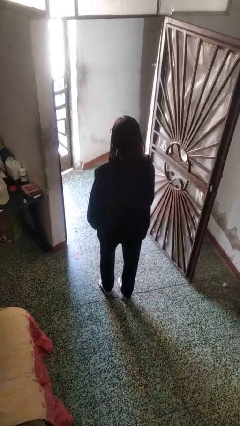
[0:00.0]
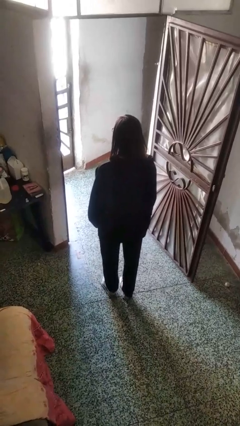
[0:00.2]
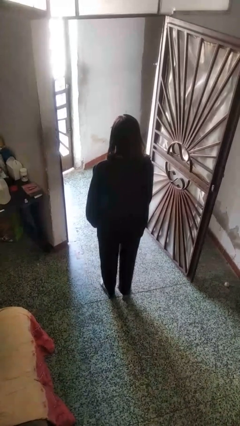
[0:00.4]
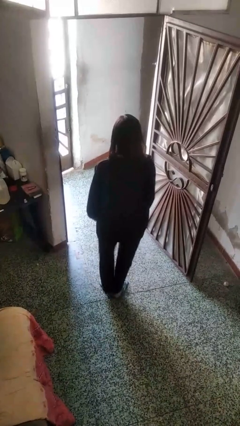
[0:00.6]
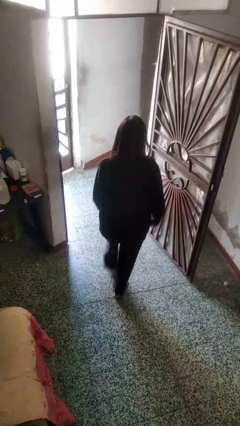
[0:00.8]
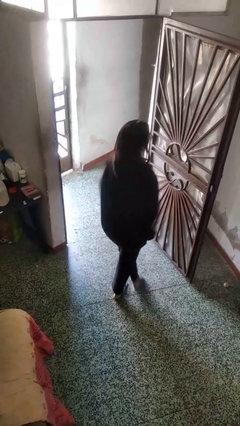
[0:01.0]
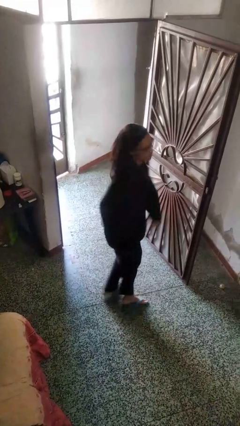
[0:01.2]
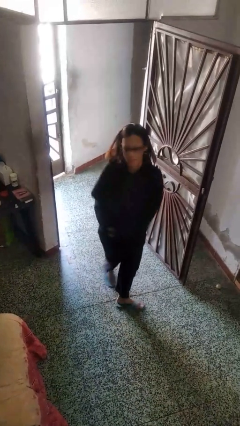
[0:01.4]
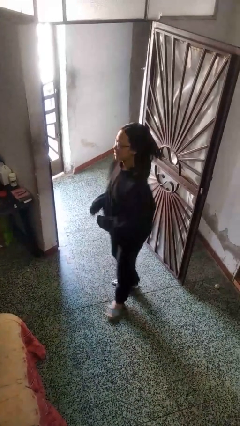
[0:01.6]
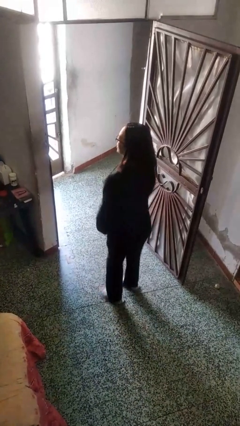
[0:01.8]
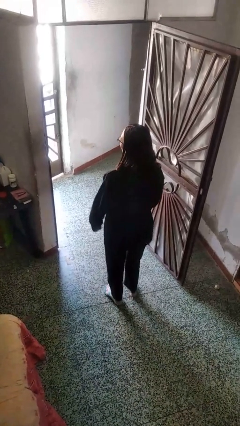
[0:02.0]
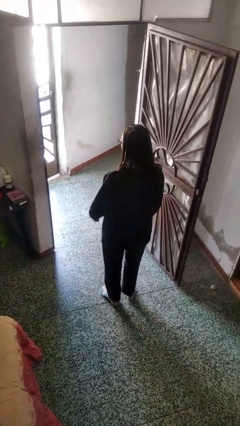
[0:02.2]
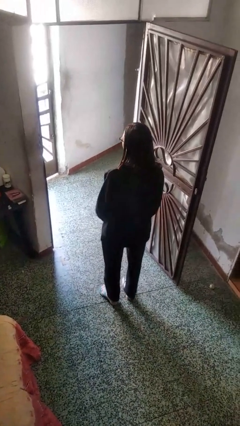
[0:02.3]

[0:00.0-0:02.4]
person twirls

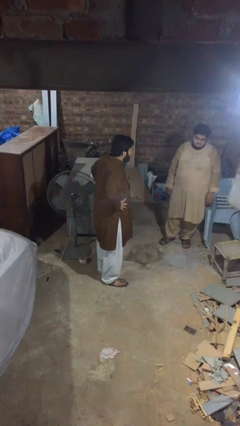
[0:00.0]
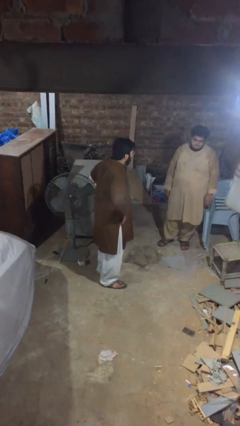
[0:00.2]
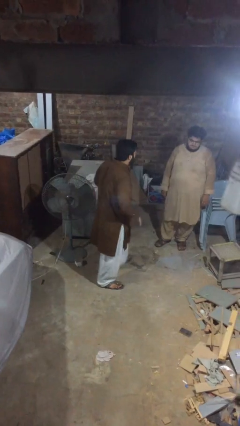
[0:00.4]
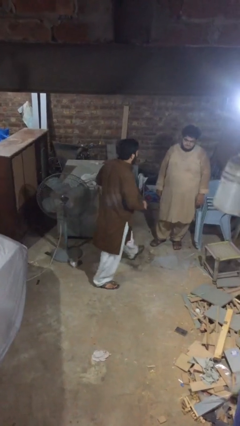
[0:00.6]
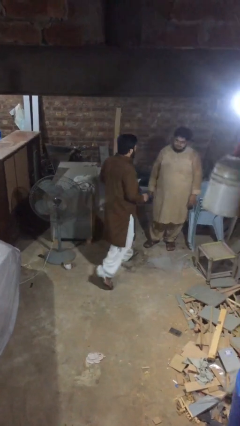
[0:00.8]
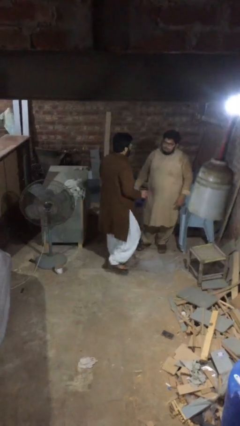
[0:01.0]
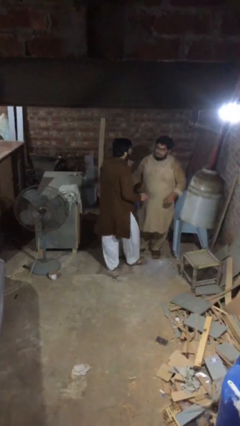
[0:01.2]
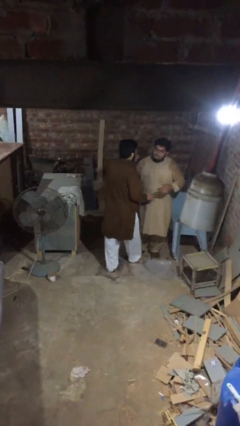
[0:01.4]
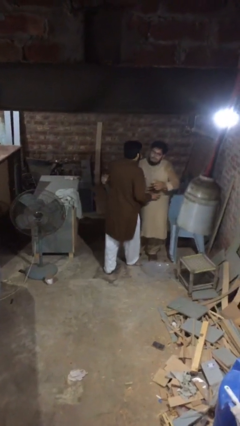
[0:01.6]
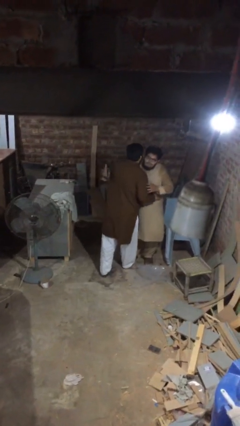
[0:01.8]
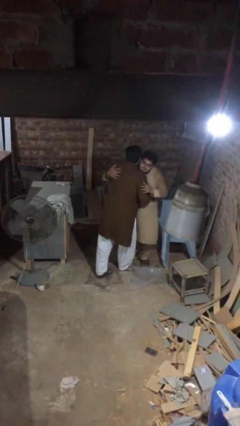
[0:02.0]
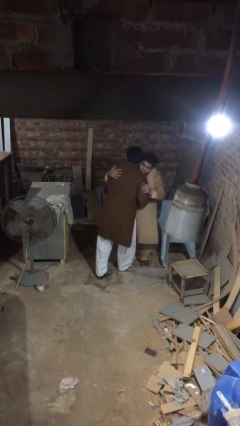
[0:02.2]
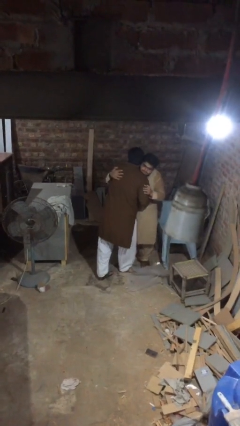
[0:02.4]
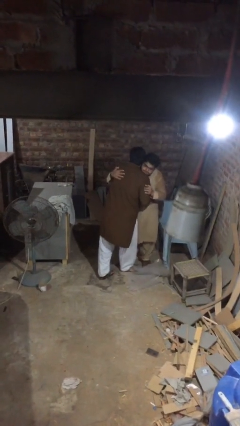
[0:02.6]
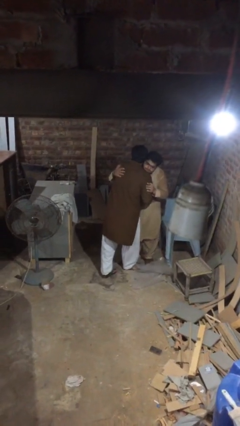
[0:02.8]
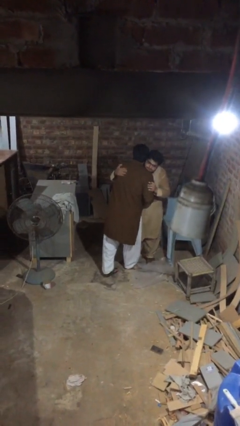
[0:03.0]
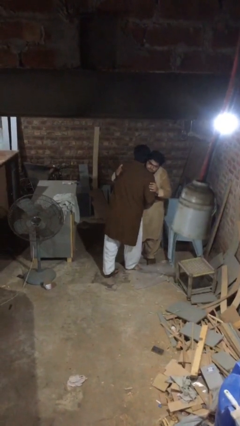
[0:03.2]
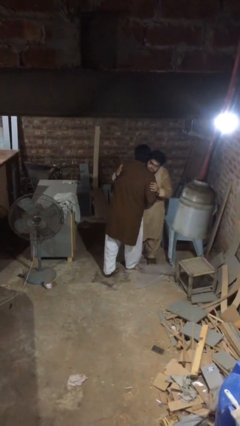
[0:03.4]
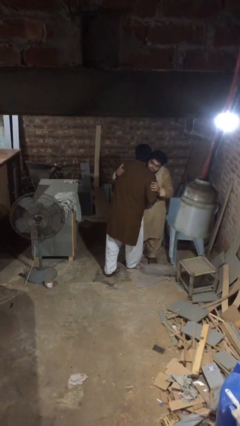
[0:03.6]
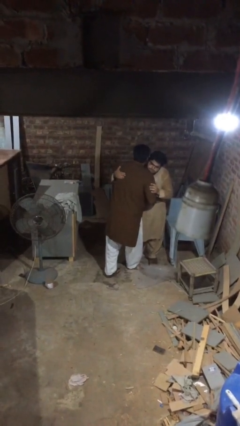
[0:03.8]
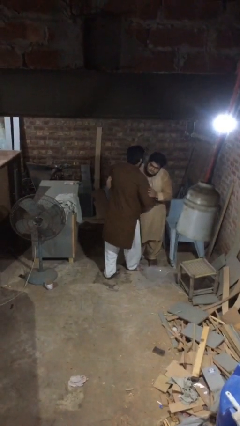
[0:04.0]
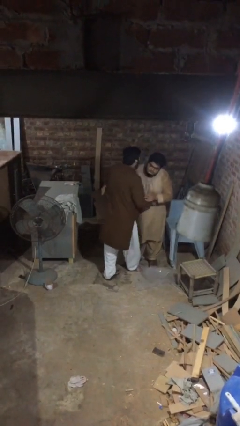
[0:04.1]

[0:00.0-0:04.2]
person embraces person

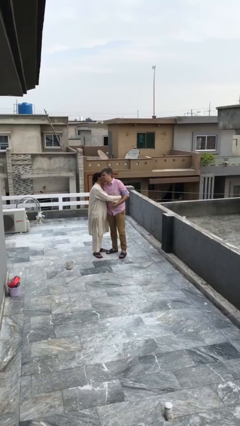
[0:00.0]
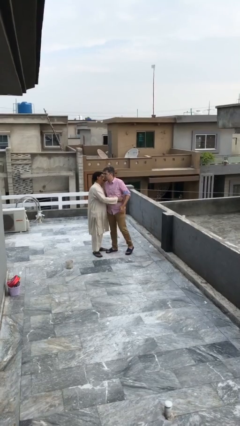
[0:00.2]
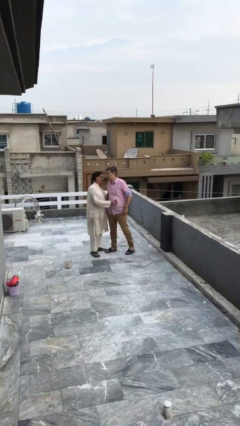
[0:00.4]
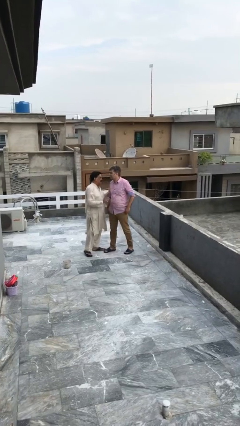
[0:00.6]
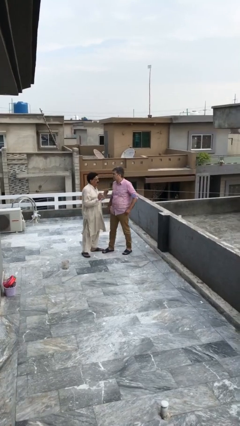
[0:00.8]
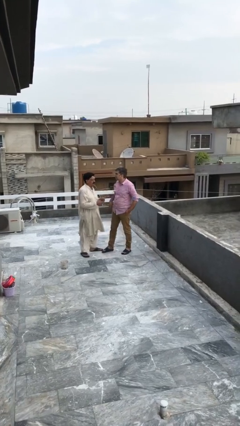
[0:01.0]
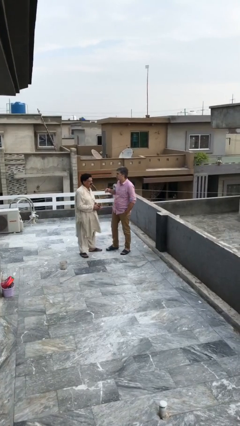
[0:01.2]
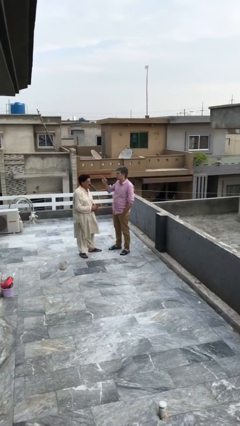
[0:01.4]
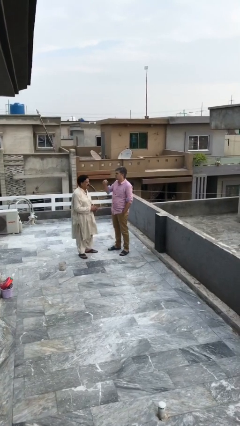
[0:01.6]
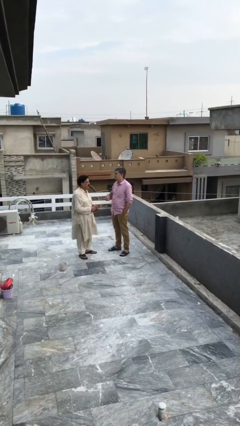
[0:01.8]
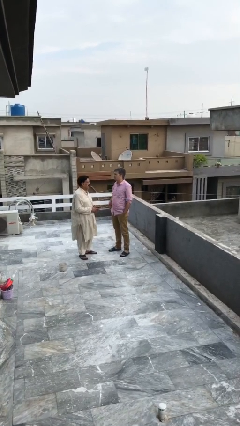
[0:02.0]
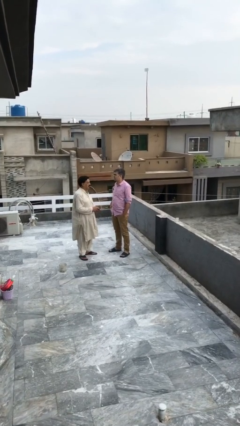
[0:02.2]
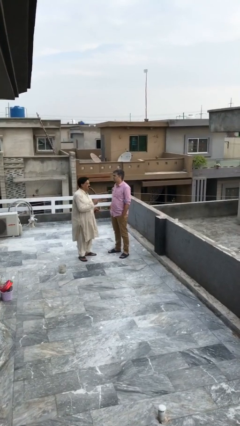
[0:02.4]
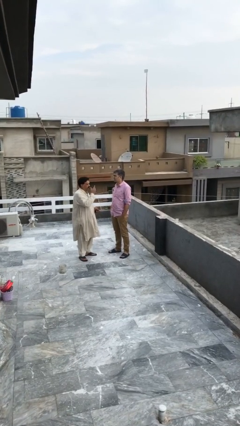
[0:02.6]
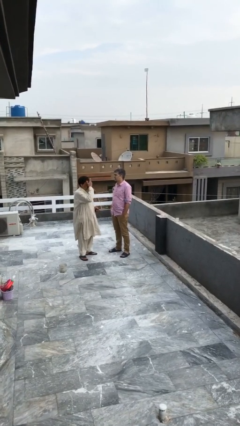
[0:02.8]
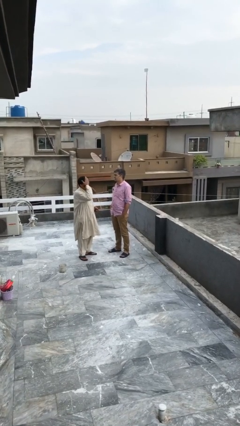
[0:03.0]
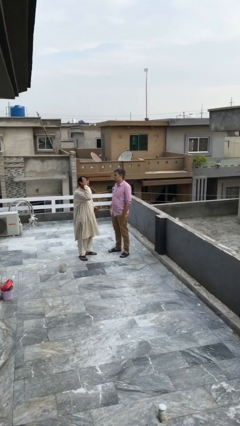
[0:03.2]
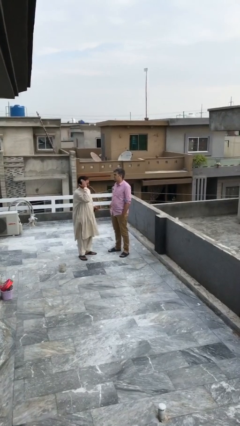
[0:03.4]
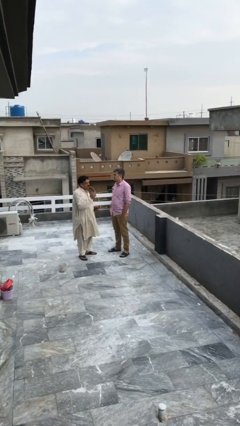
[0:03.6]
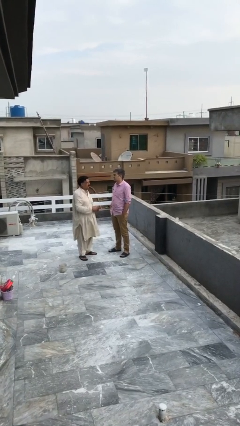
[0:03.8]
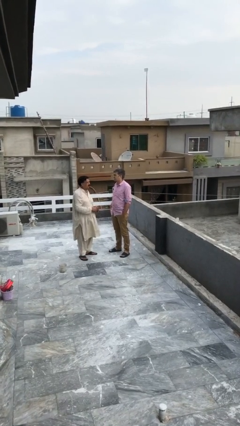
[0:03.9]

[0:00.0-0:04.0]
person talks to person

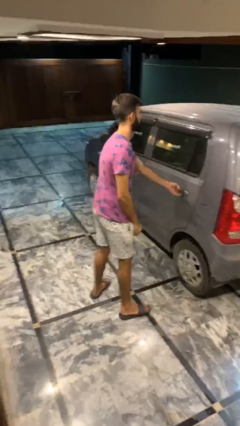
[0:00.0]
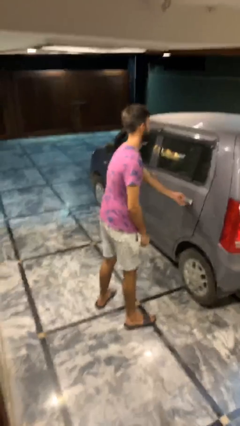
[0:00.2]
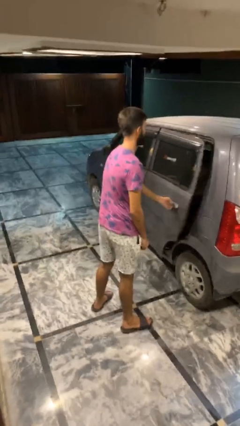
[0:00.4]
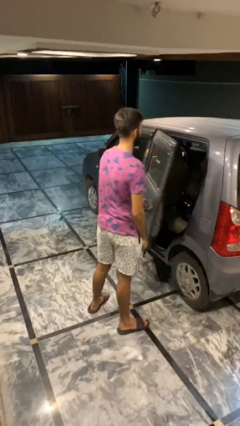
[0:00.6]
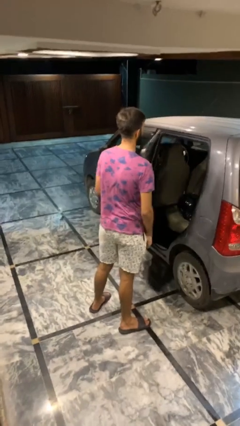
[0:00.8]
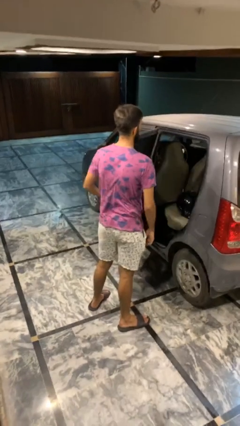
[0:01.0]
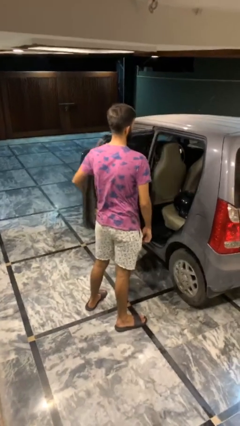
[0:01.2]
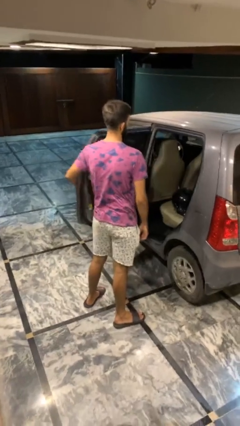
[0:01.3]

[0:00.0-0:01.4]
person opens car door

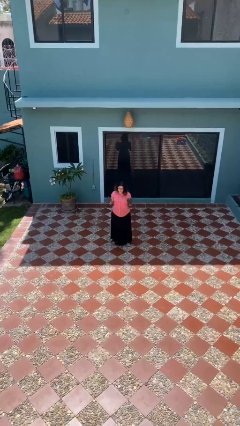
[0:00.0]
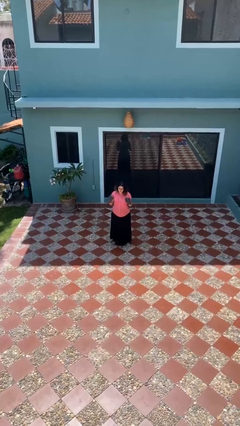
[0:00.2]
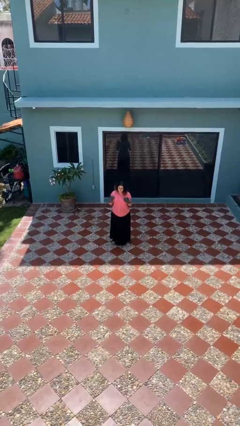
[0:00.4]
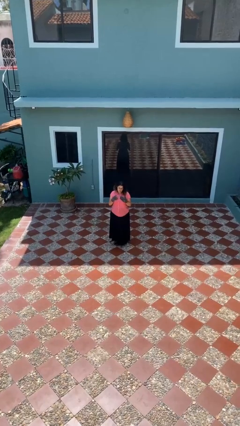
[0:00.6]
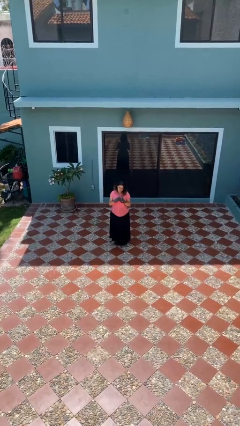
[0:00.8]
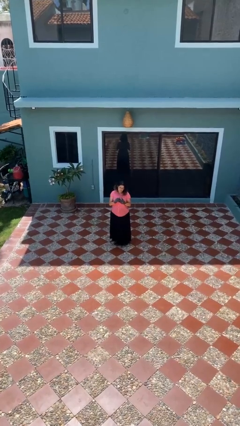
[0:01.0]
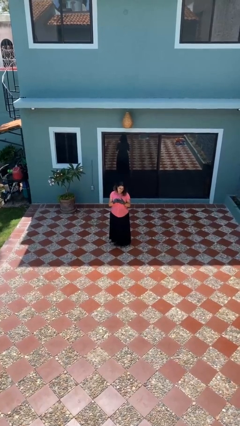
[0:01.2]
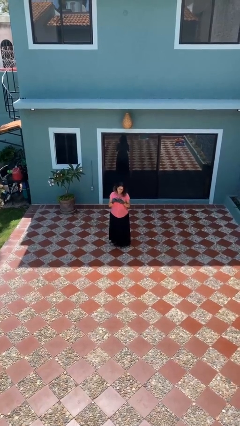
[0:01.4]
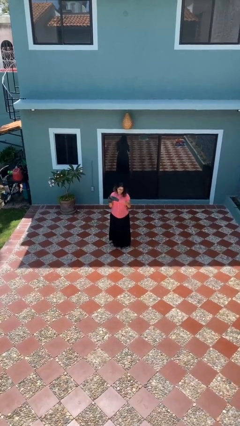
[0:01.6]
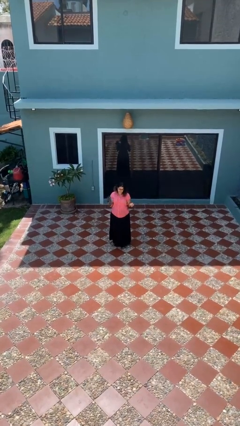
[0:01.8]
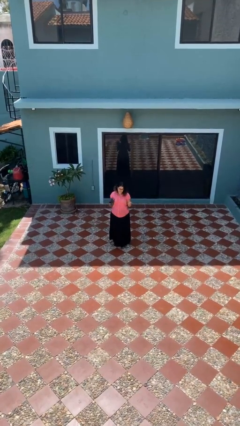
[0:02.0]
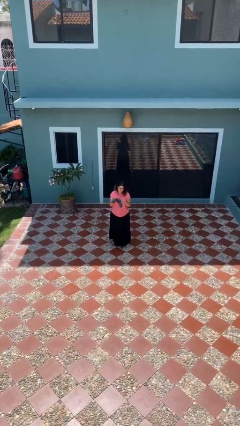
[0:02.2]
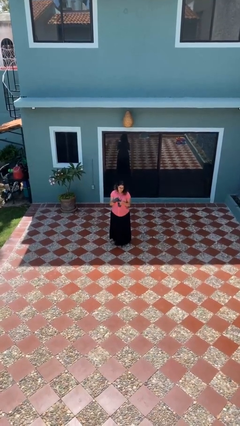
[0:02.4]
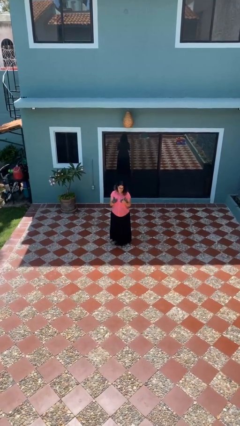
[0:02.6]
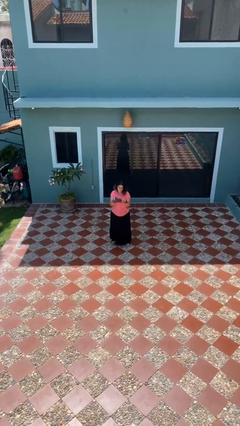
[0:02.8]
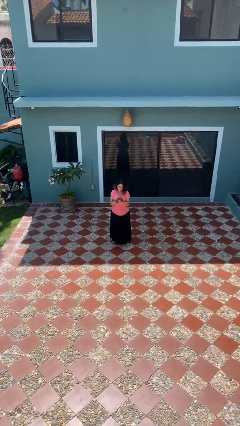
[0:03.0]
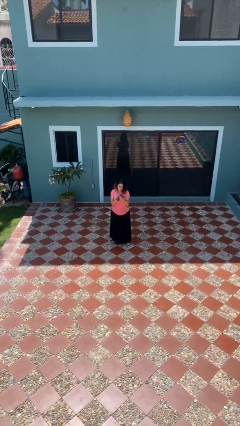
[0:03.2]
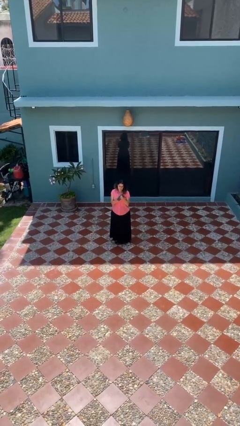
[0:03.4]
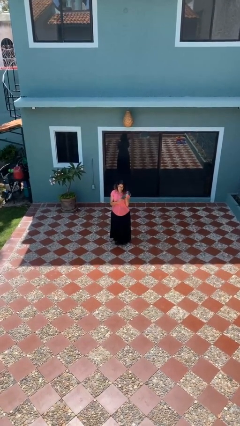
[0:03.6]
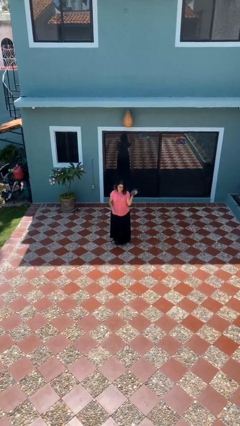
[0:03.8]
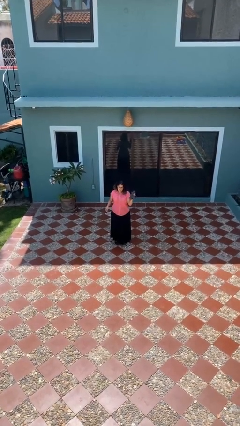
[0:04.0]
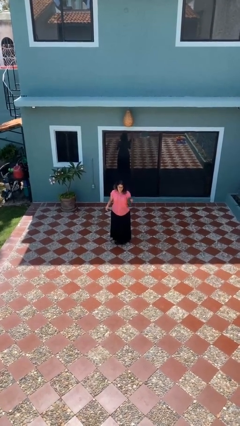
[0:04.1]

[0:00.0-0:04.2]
person takes off gloves

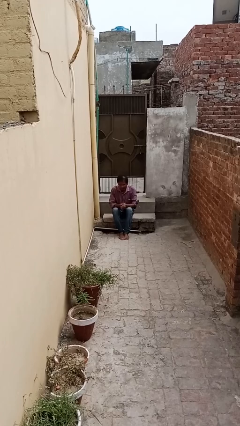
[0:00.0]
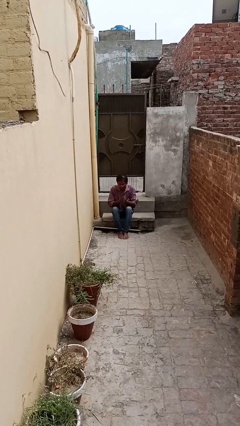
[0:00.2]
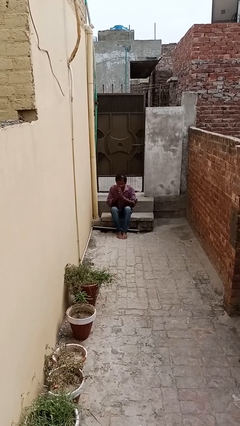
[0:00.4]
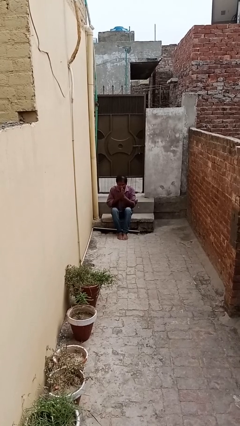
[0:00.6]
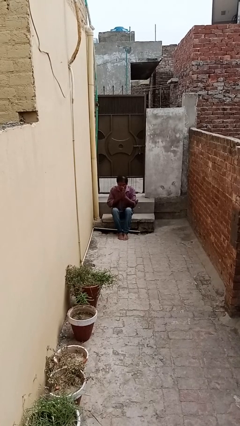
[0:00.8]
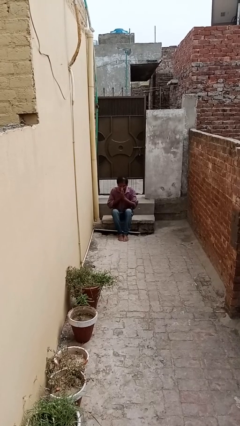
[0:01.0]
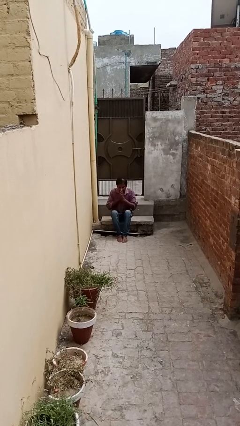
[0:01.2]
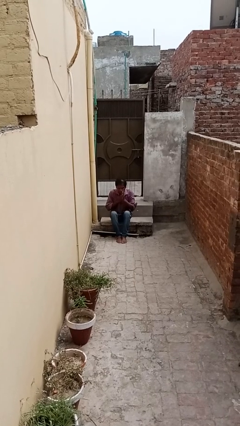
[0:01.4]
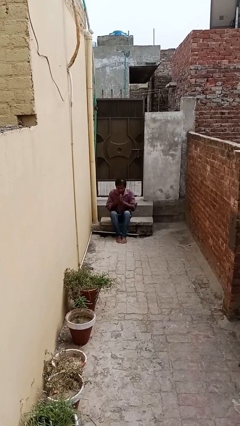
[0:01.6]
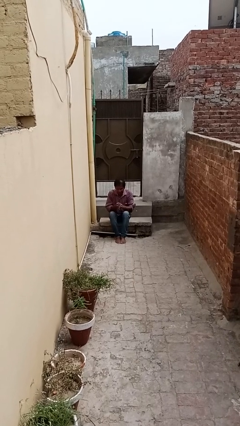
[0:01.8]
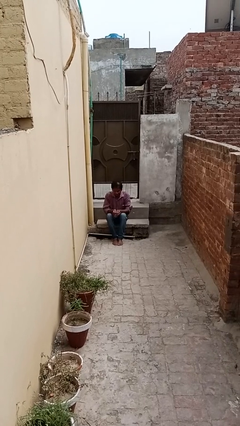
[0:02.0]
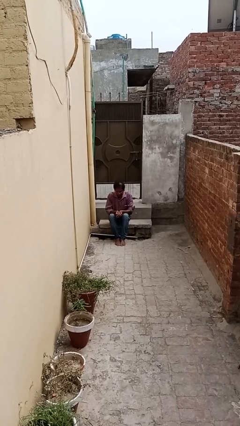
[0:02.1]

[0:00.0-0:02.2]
person blows into hands
